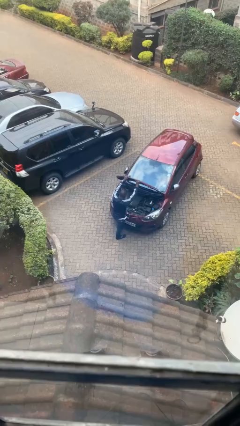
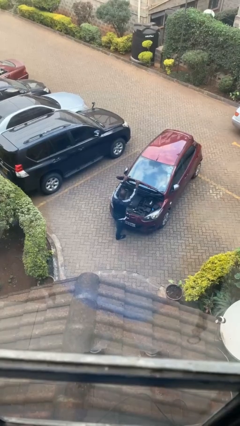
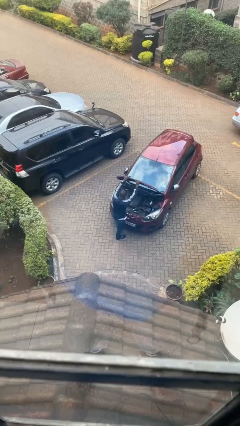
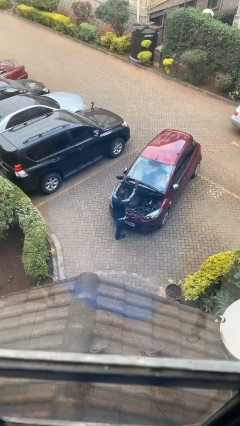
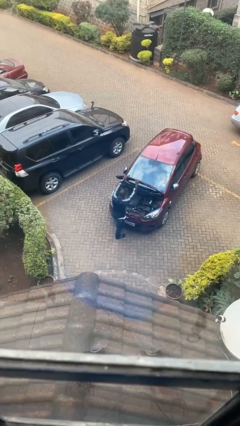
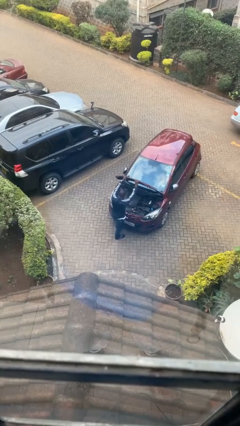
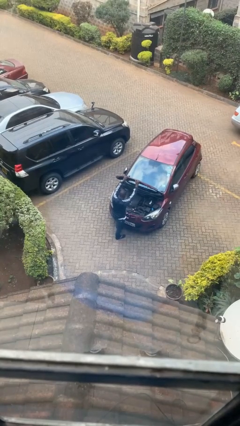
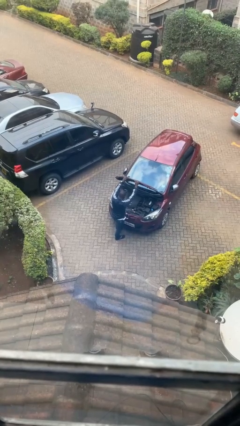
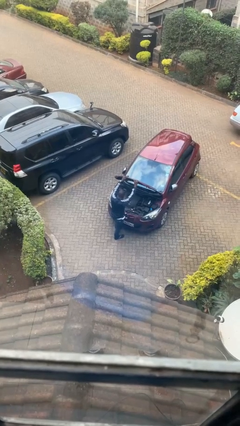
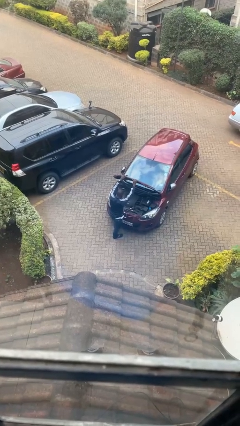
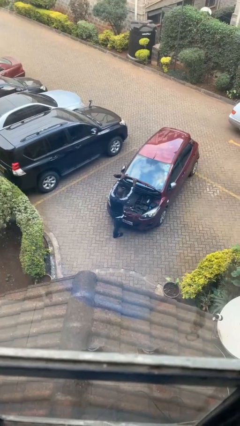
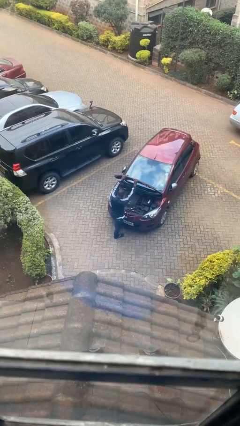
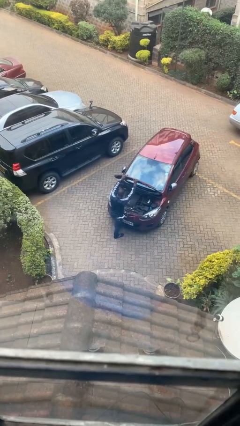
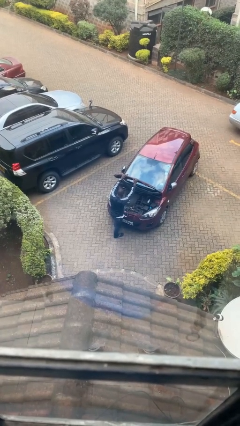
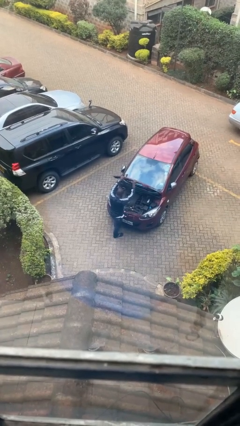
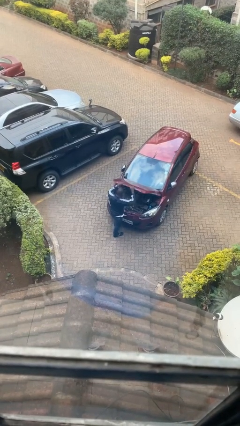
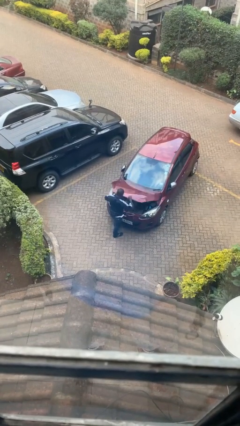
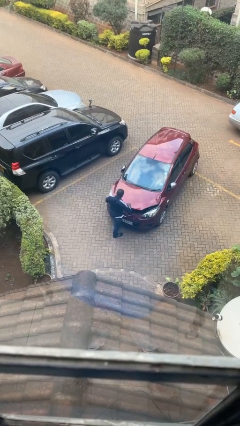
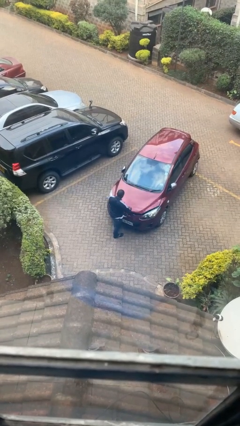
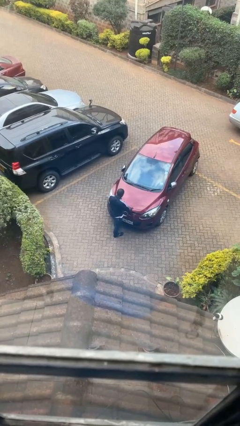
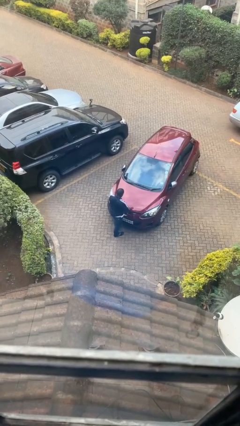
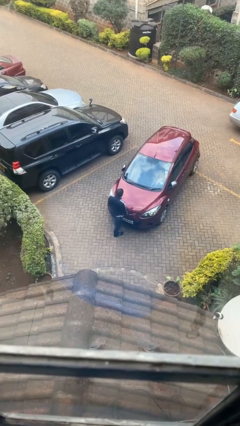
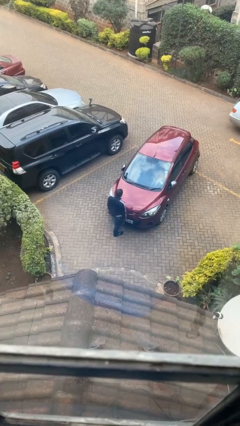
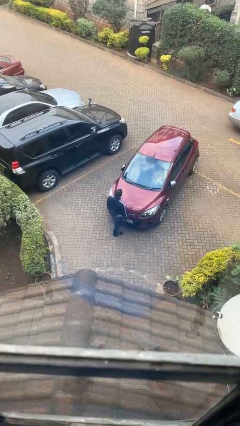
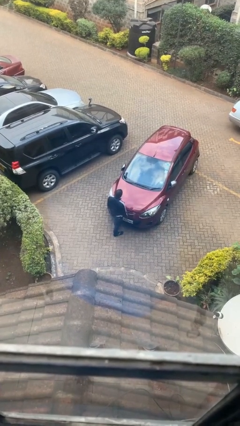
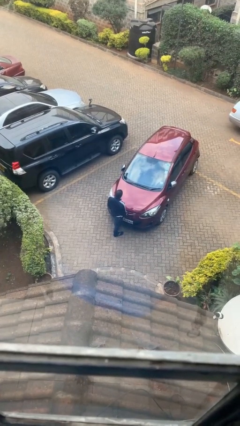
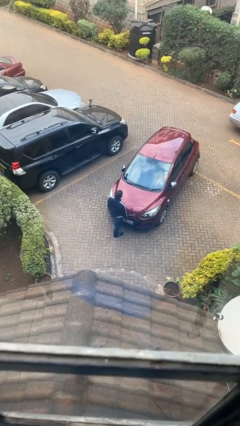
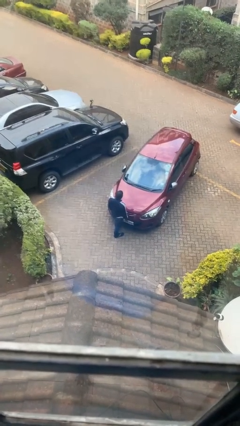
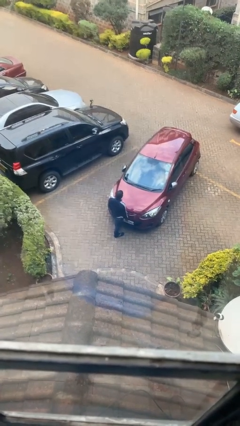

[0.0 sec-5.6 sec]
person closes car hood

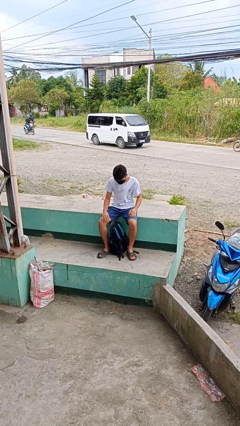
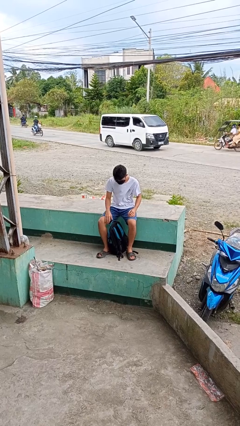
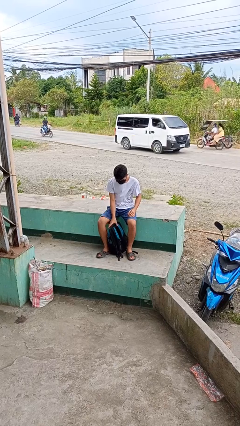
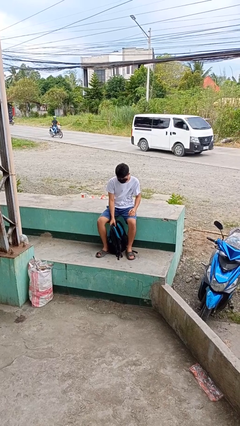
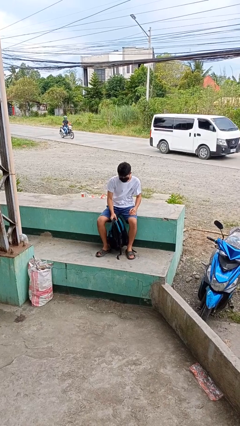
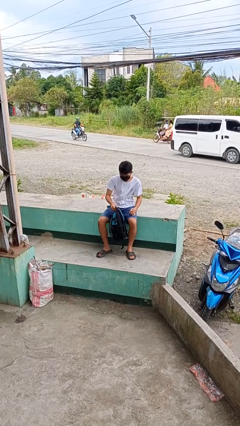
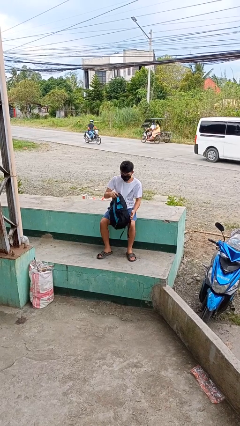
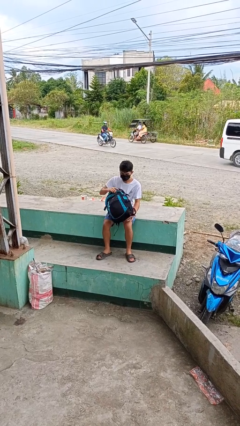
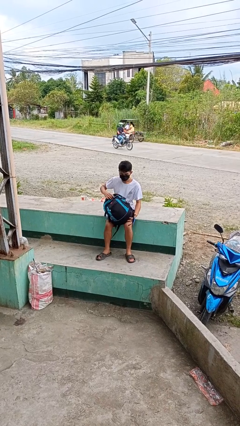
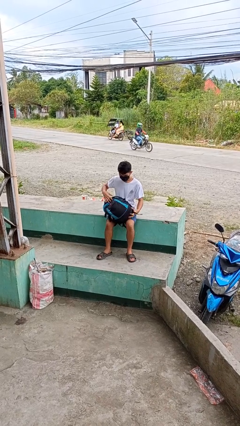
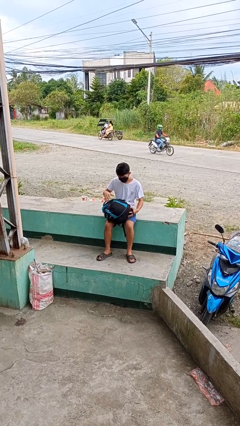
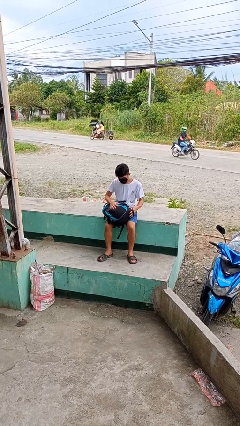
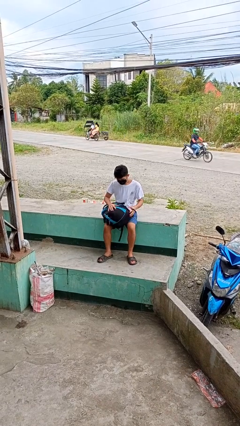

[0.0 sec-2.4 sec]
person picks up object from floor

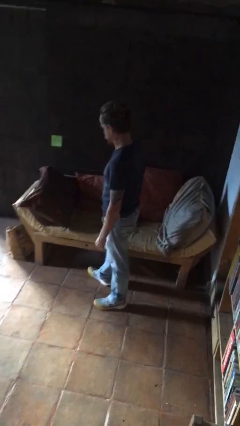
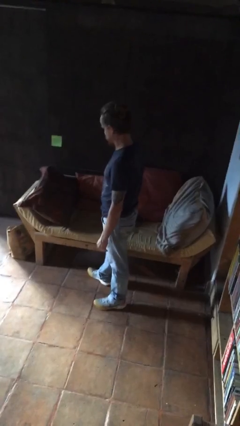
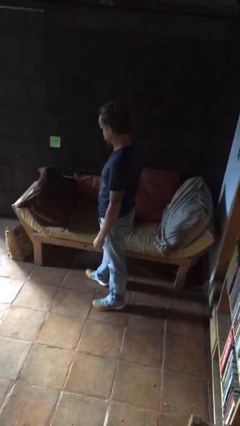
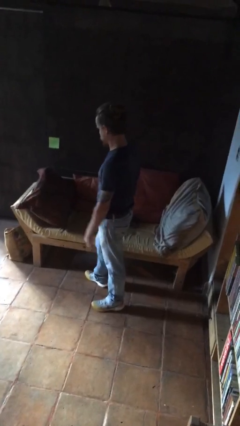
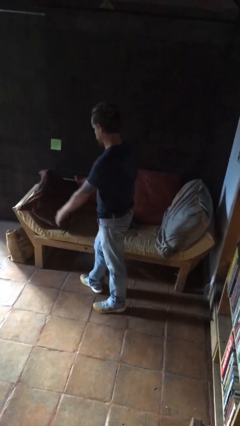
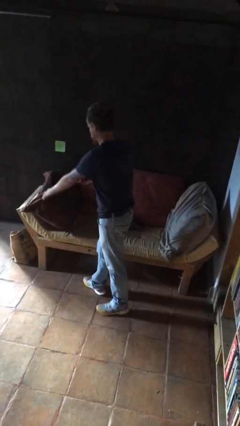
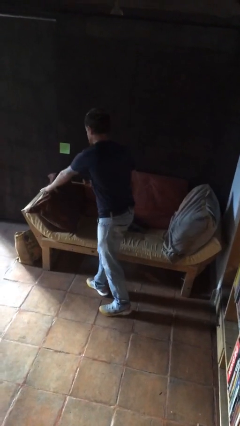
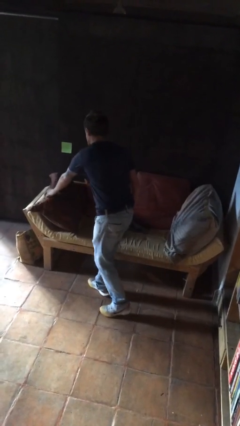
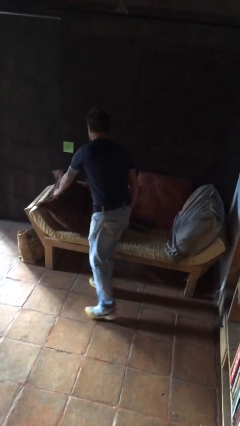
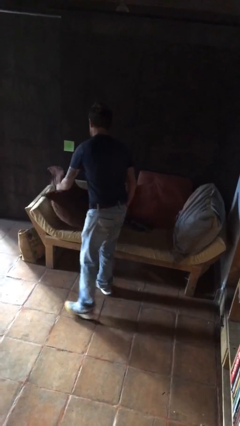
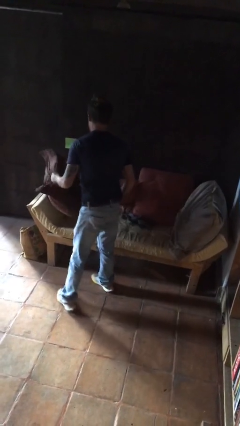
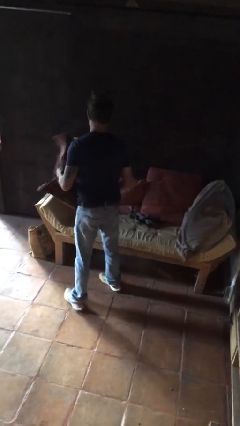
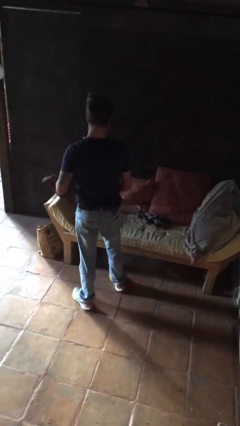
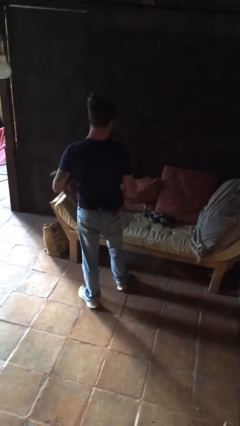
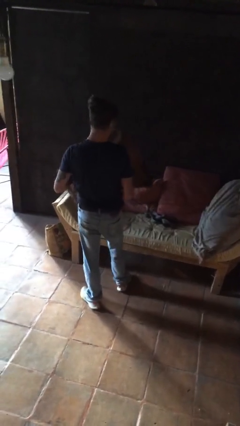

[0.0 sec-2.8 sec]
person picks up object from couch

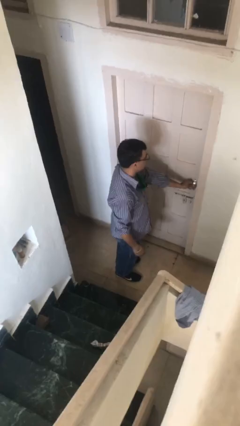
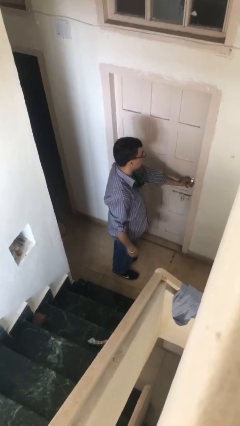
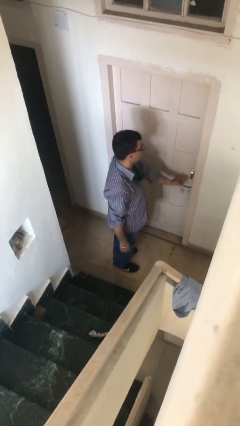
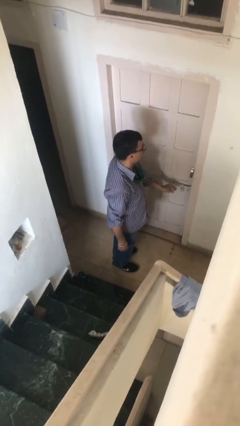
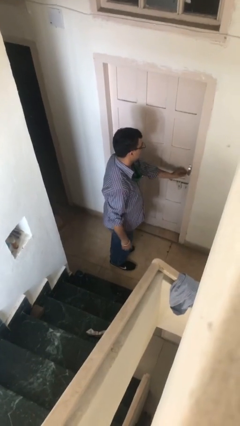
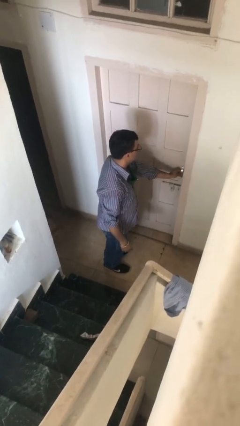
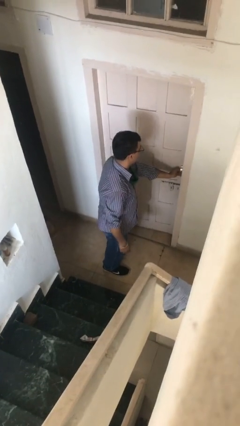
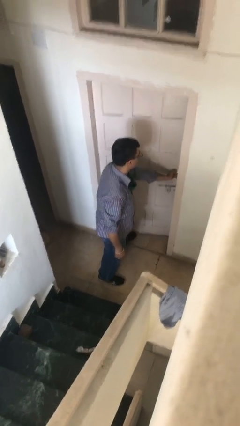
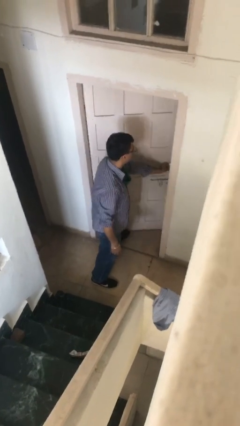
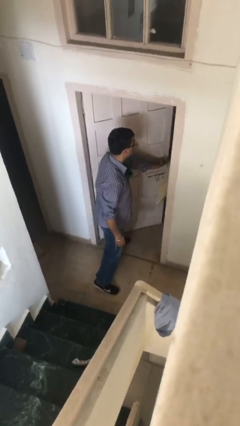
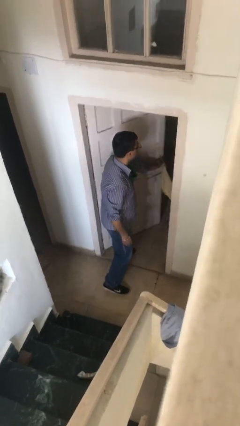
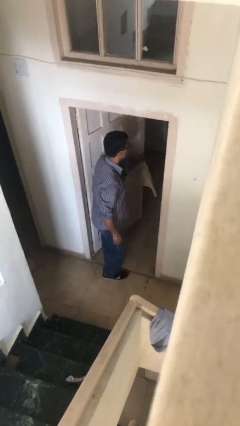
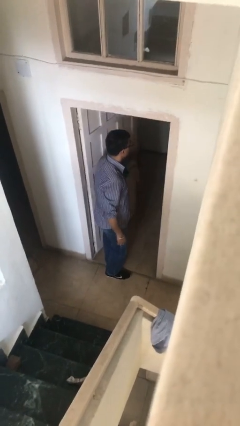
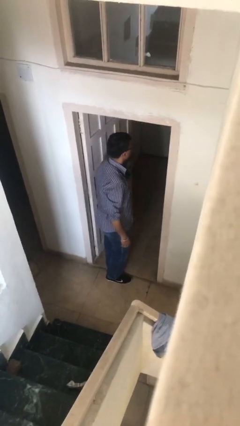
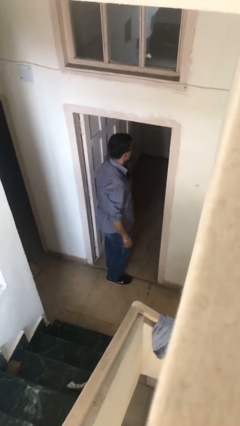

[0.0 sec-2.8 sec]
person opens facility door

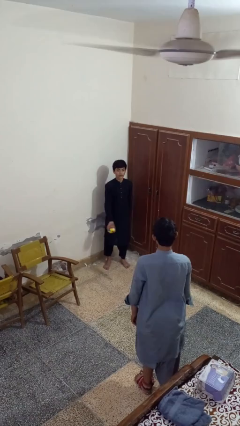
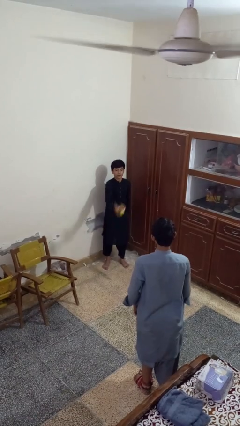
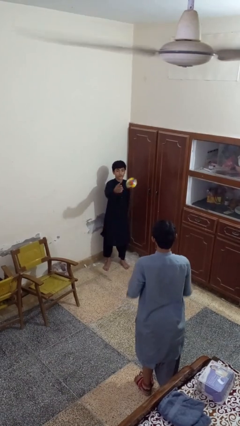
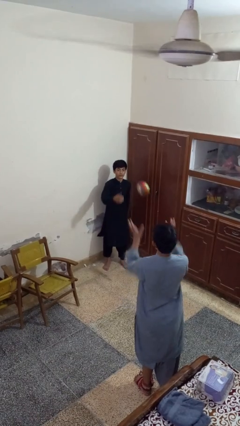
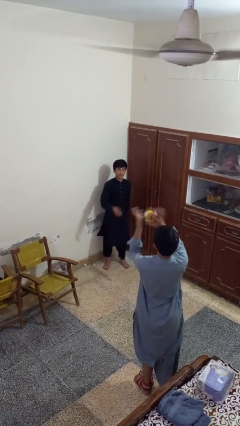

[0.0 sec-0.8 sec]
person throws object to person

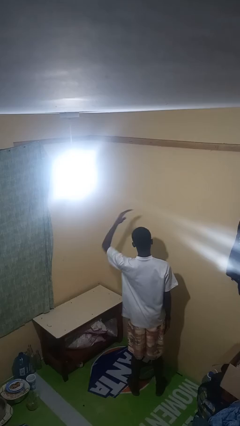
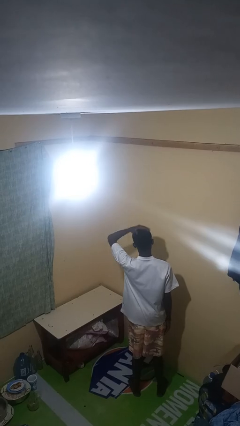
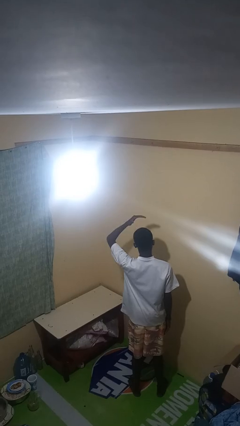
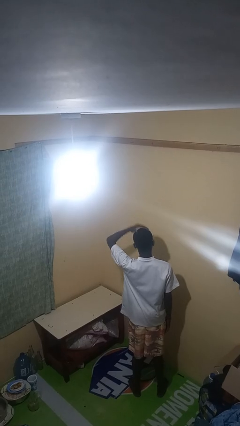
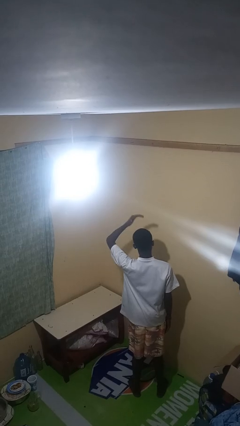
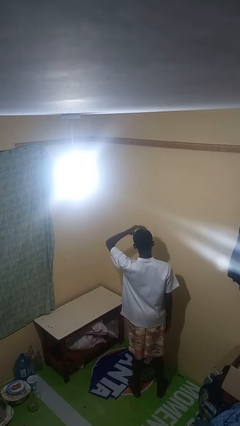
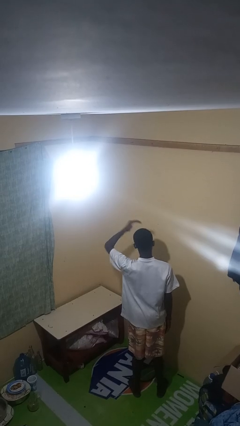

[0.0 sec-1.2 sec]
person pats head

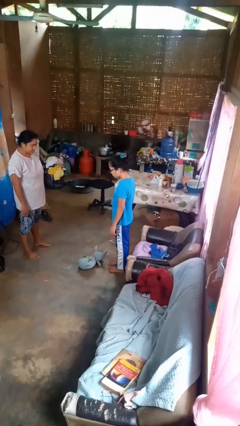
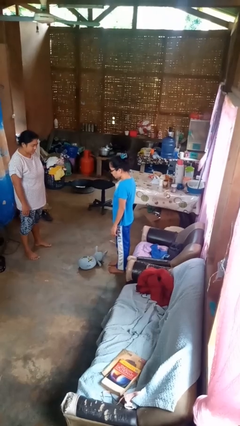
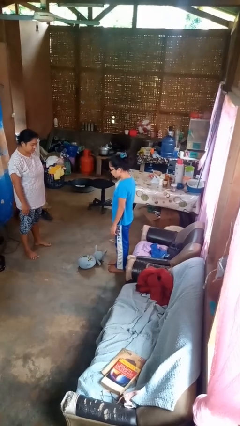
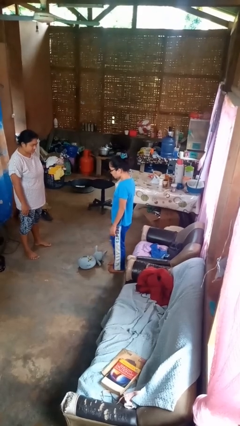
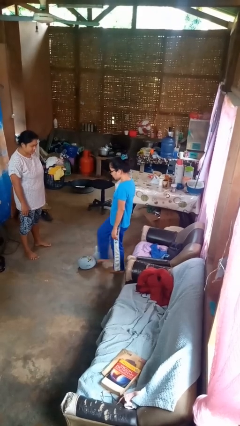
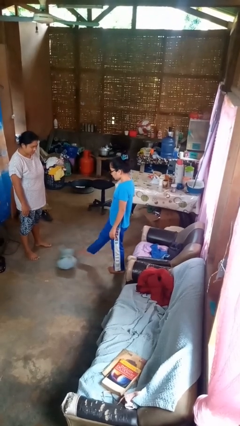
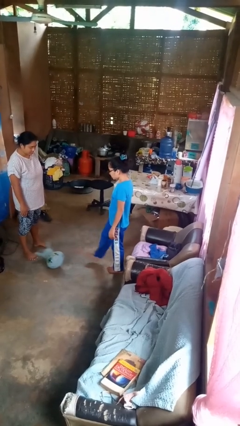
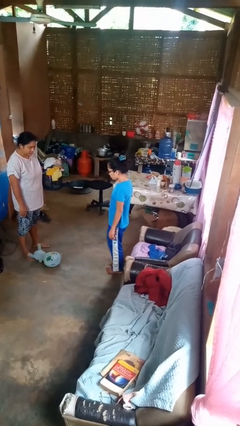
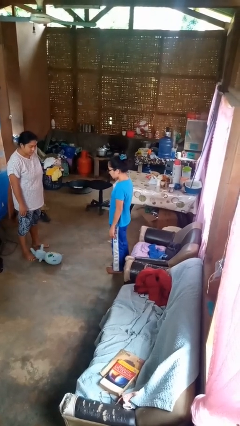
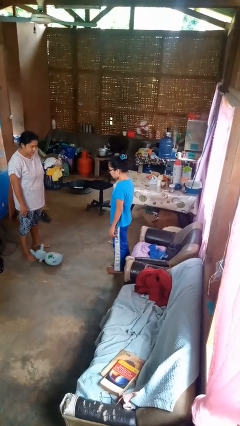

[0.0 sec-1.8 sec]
person kicks object to person
